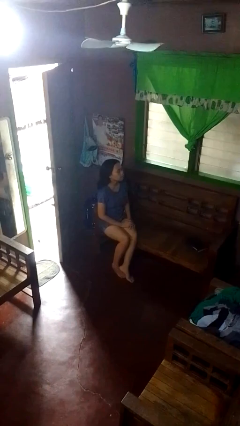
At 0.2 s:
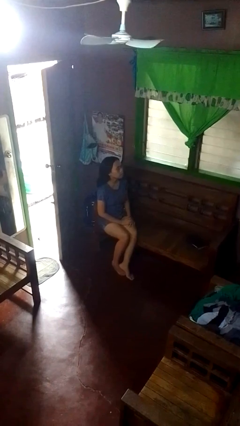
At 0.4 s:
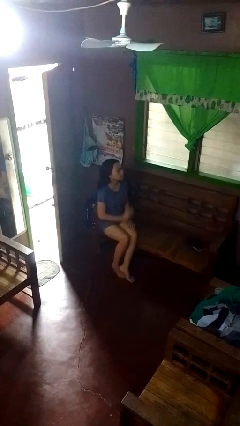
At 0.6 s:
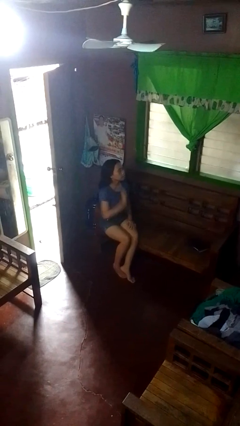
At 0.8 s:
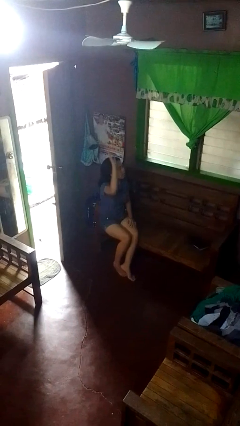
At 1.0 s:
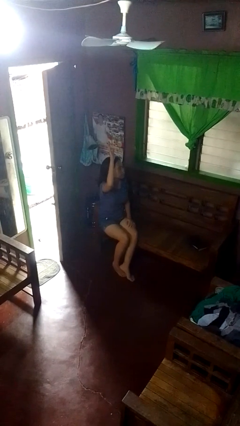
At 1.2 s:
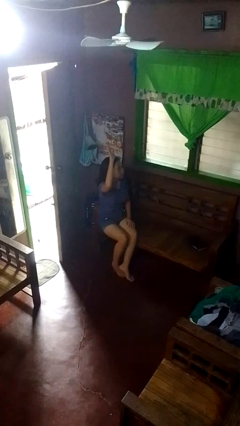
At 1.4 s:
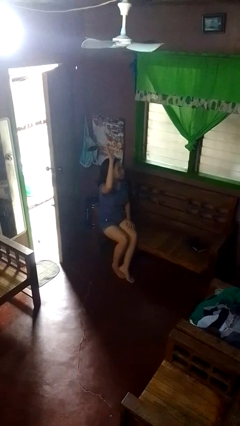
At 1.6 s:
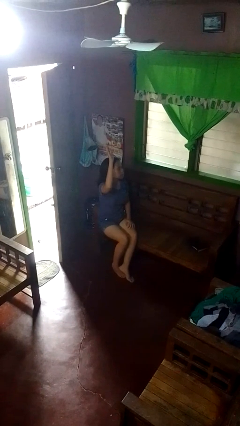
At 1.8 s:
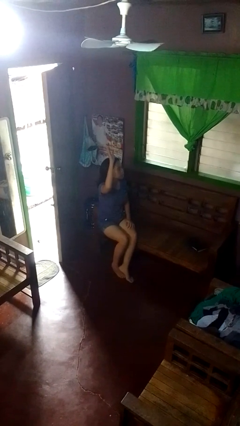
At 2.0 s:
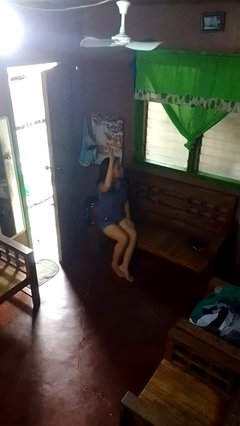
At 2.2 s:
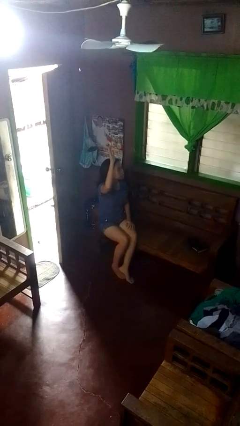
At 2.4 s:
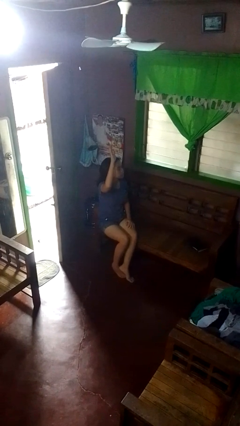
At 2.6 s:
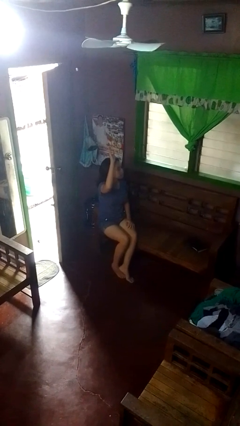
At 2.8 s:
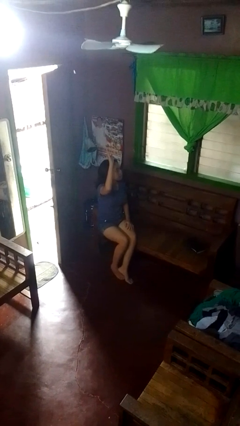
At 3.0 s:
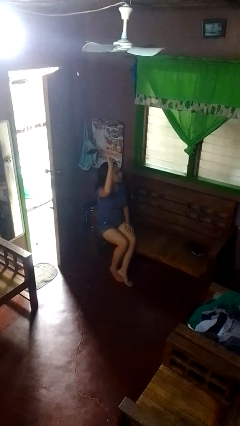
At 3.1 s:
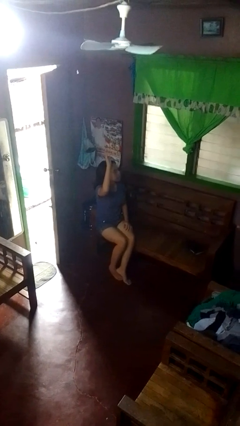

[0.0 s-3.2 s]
person gestures raise hand

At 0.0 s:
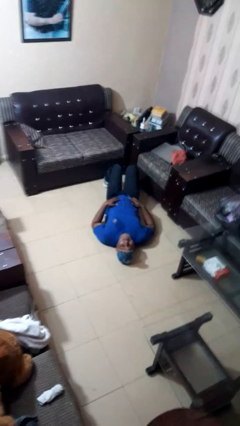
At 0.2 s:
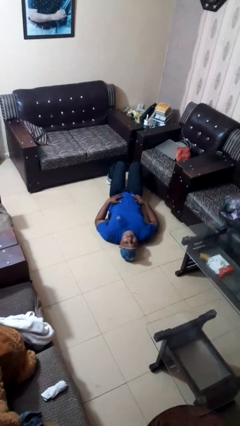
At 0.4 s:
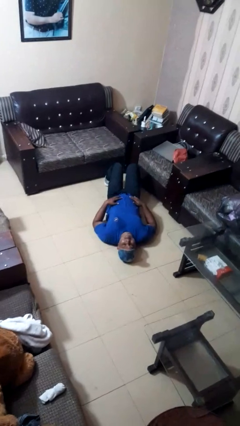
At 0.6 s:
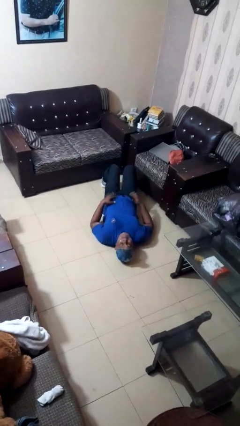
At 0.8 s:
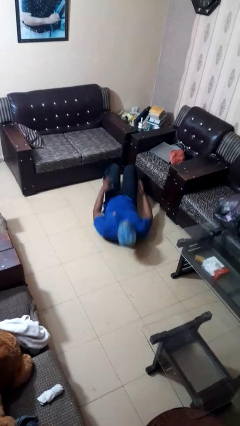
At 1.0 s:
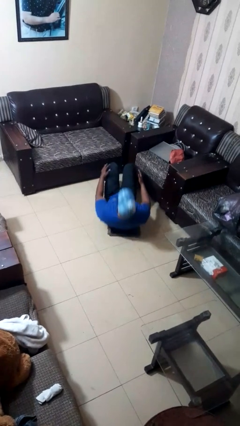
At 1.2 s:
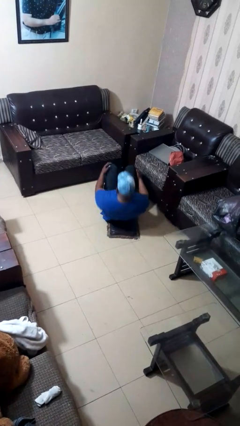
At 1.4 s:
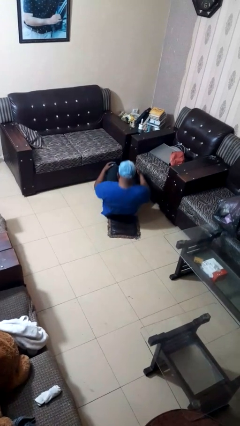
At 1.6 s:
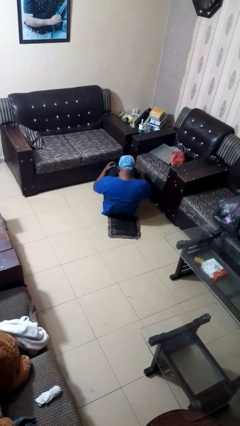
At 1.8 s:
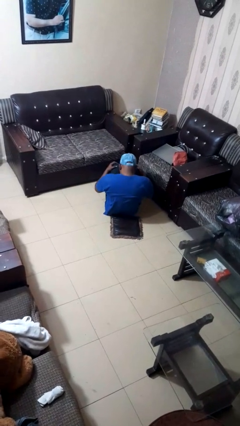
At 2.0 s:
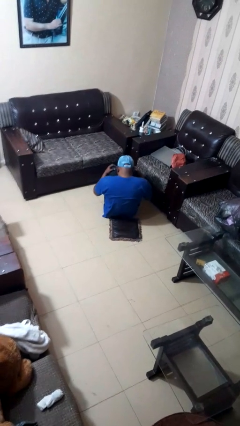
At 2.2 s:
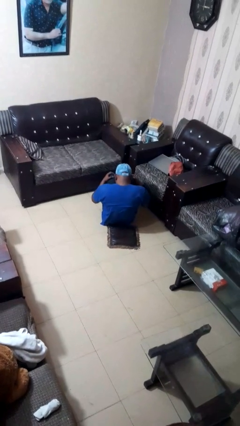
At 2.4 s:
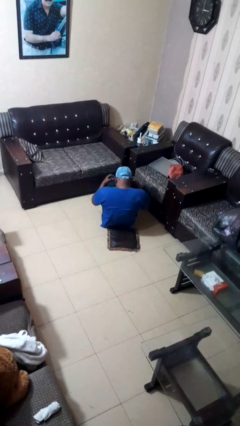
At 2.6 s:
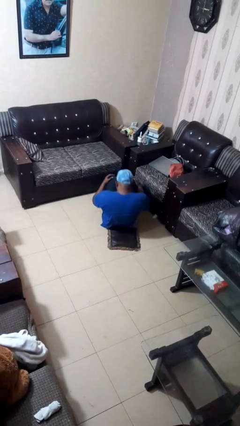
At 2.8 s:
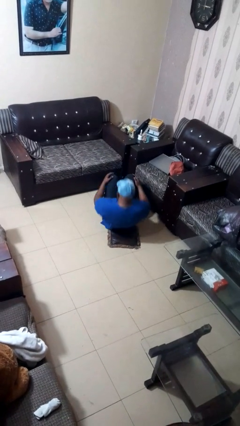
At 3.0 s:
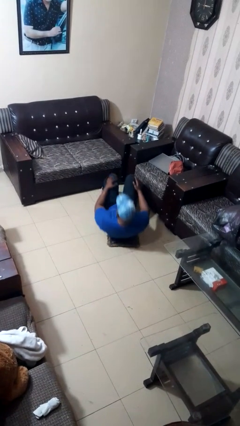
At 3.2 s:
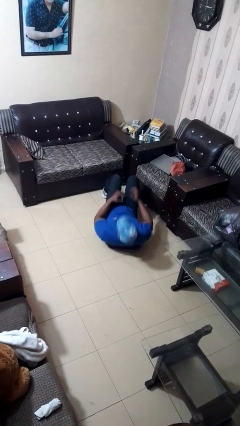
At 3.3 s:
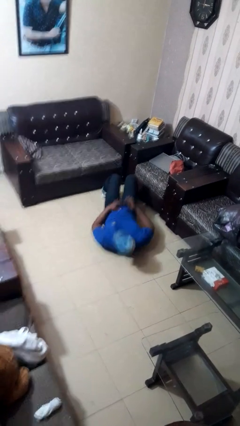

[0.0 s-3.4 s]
person exercises with situp

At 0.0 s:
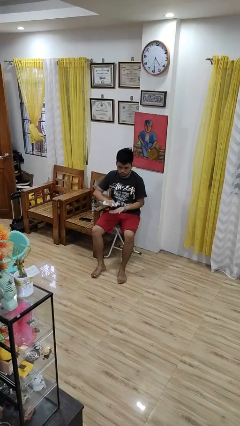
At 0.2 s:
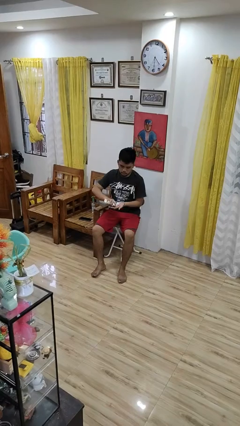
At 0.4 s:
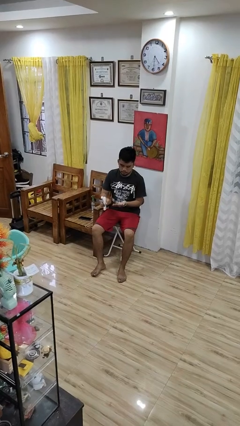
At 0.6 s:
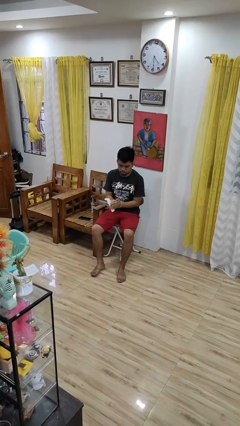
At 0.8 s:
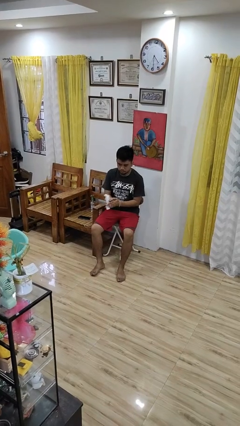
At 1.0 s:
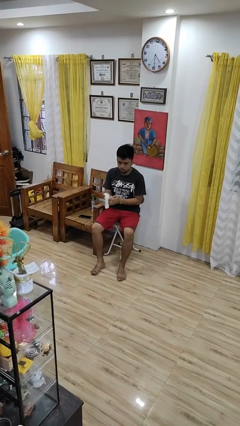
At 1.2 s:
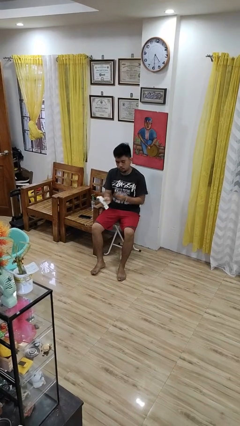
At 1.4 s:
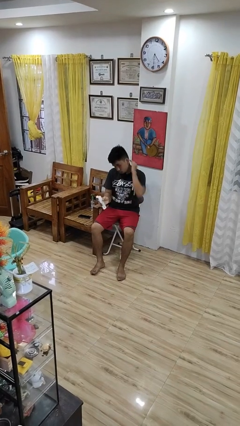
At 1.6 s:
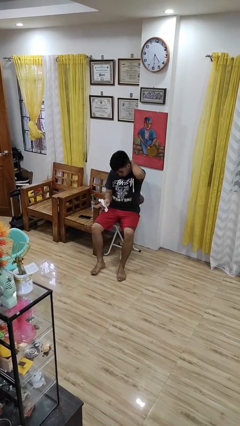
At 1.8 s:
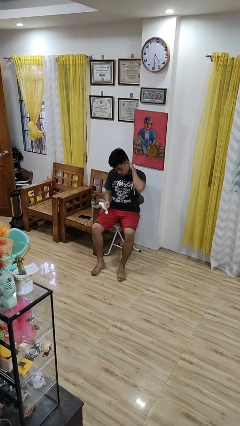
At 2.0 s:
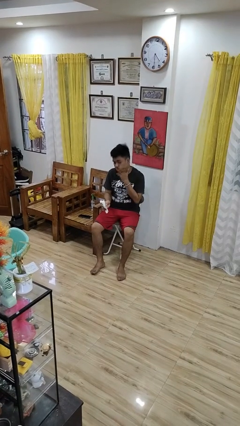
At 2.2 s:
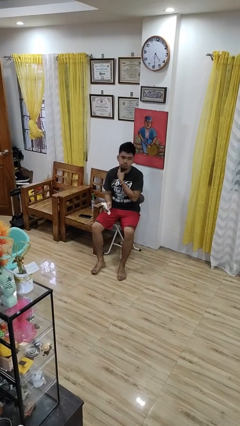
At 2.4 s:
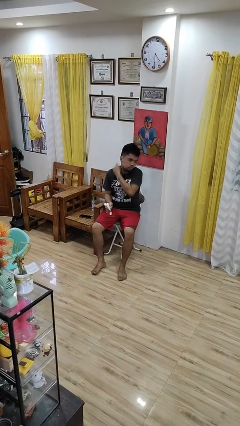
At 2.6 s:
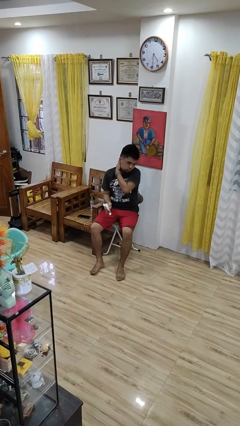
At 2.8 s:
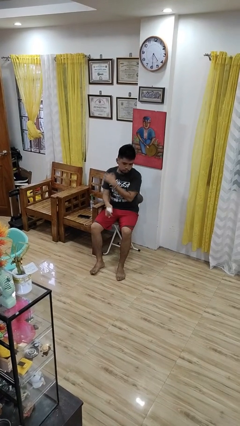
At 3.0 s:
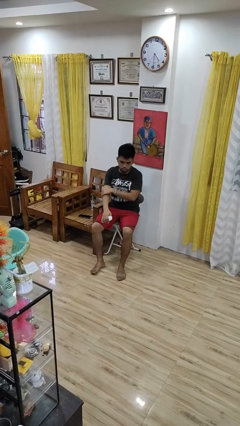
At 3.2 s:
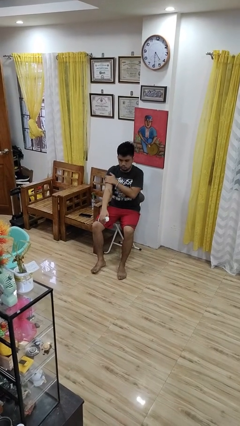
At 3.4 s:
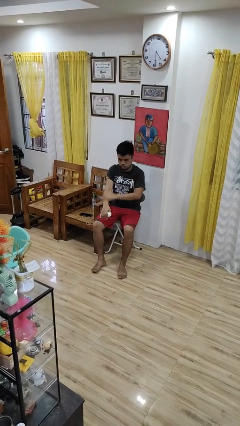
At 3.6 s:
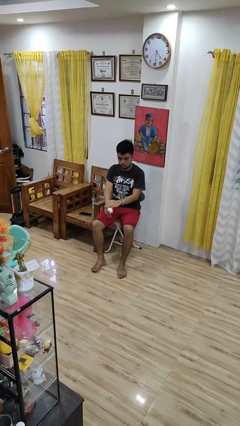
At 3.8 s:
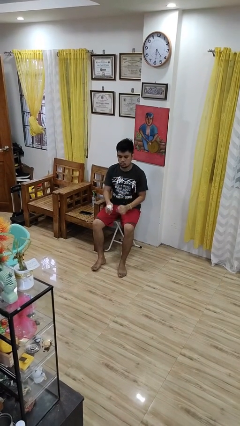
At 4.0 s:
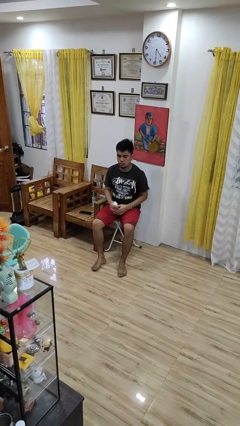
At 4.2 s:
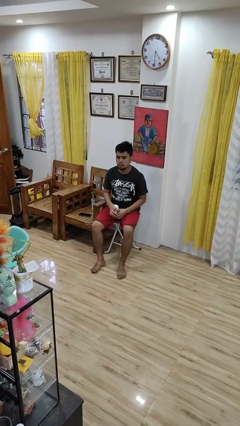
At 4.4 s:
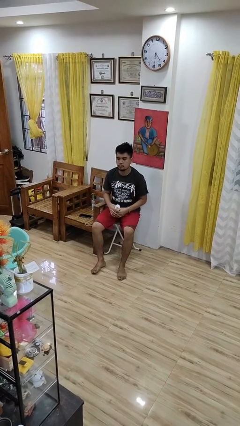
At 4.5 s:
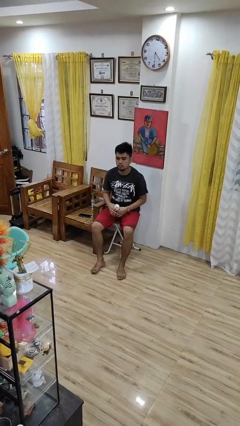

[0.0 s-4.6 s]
person applies sunscreen

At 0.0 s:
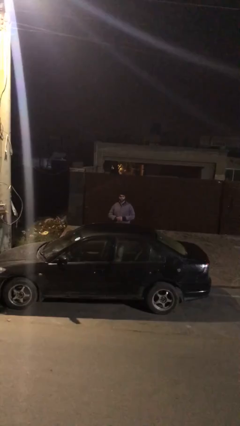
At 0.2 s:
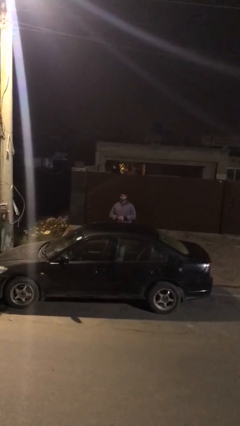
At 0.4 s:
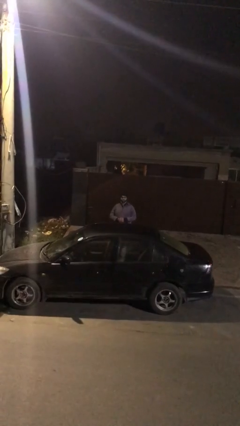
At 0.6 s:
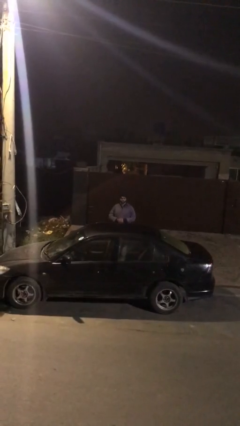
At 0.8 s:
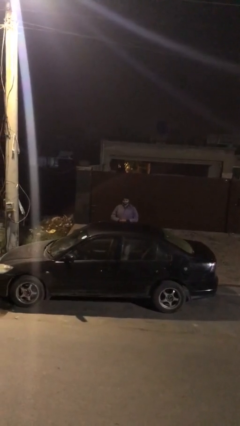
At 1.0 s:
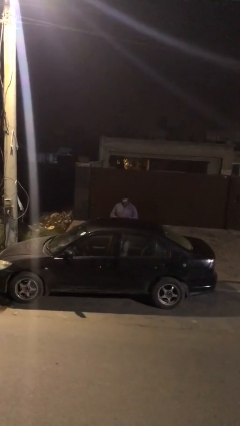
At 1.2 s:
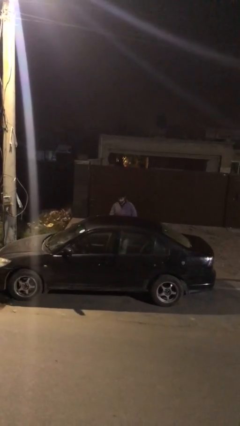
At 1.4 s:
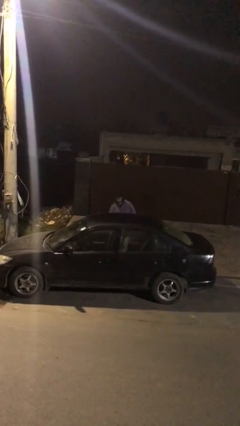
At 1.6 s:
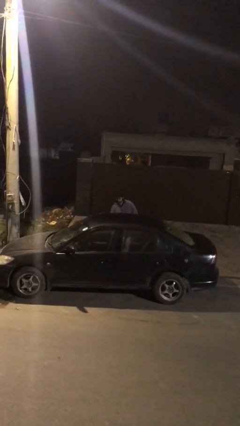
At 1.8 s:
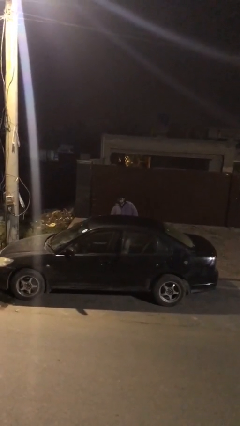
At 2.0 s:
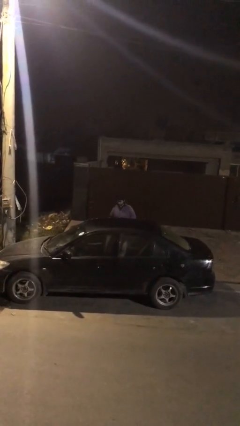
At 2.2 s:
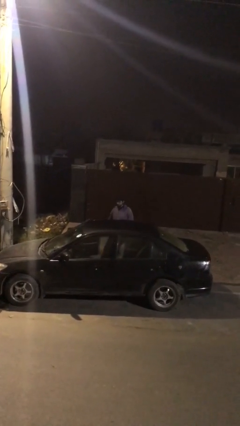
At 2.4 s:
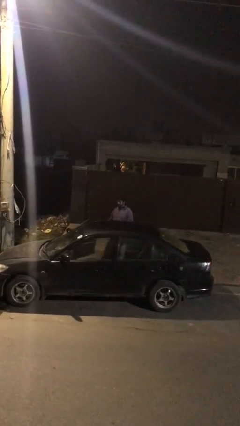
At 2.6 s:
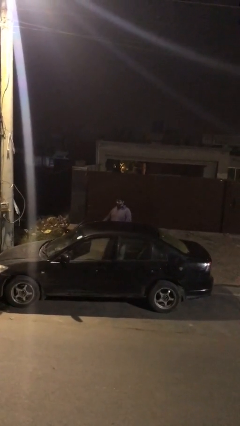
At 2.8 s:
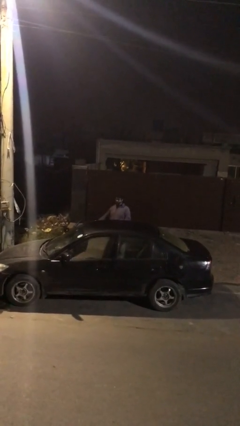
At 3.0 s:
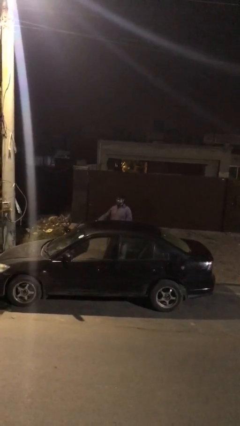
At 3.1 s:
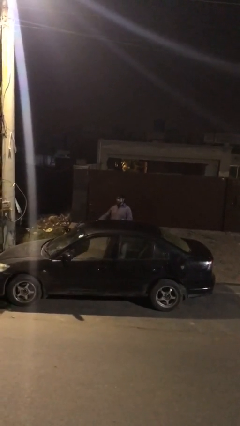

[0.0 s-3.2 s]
person opens car door

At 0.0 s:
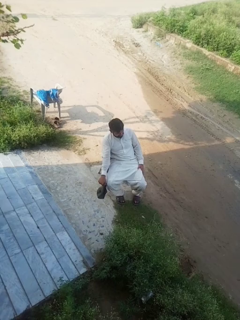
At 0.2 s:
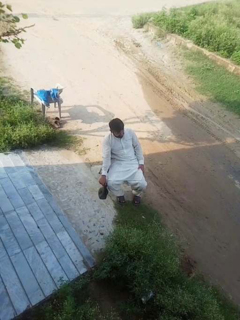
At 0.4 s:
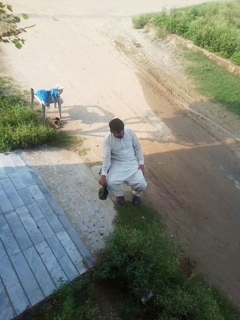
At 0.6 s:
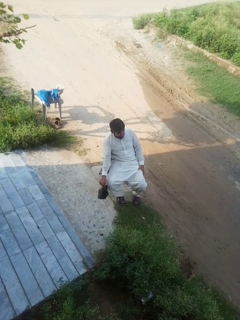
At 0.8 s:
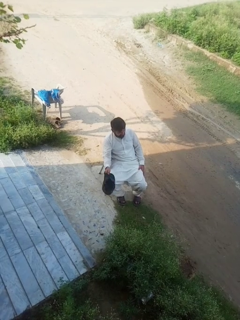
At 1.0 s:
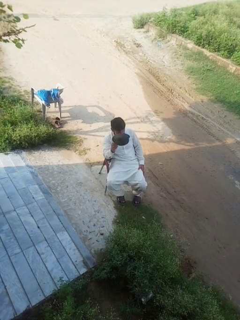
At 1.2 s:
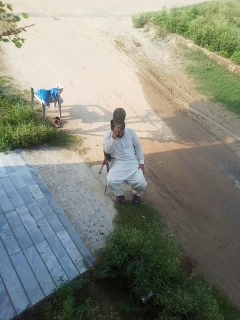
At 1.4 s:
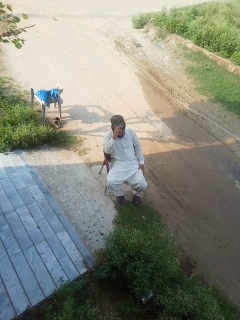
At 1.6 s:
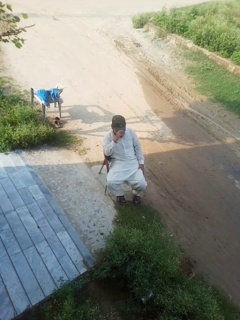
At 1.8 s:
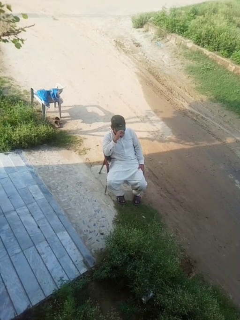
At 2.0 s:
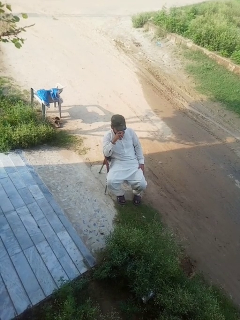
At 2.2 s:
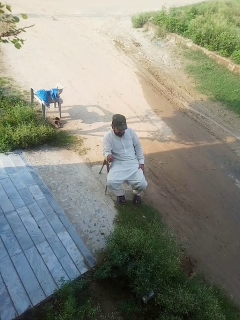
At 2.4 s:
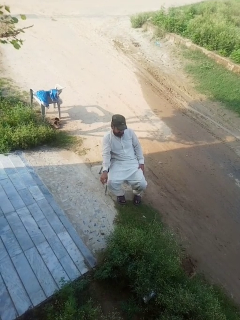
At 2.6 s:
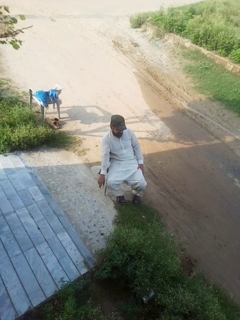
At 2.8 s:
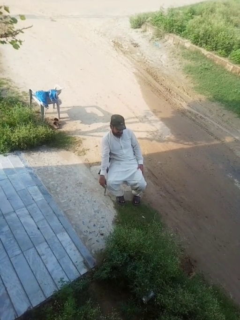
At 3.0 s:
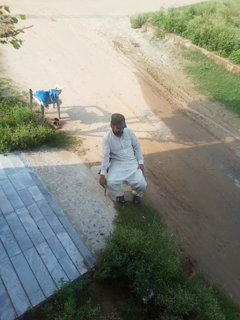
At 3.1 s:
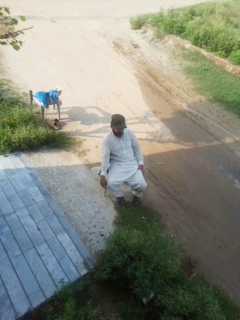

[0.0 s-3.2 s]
person puts on hat

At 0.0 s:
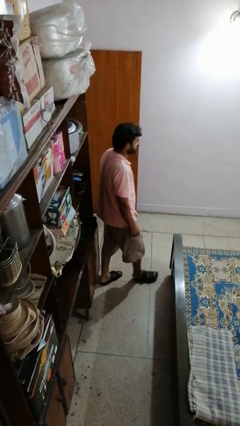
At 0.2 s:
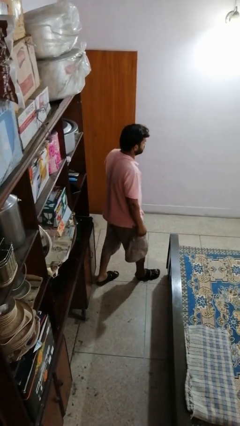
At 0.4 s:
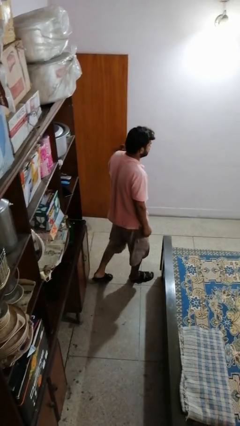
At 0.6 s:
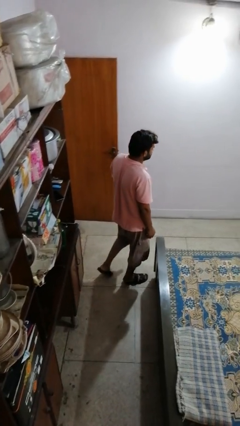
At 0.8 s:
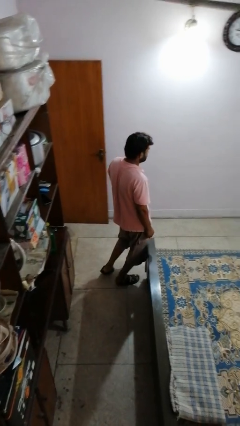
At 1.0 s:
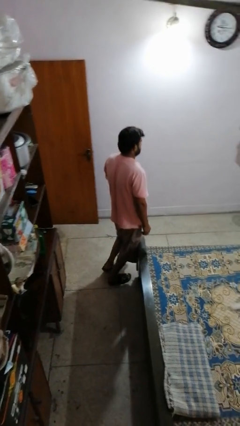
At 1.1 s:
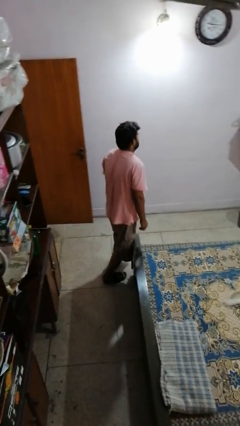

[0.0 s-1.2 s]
person trips on object on floor
